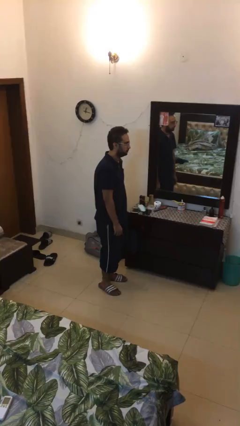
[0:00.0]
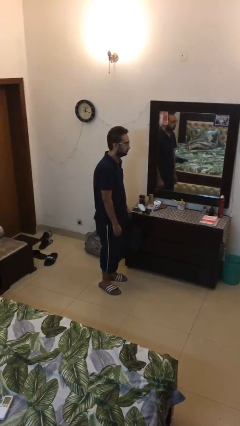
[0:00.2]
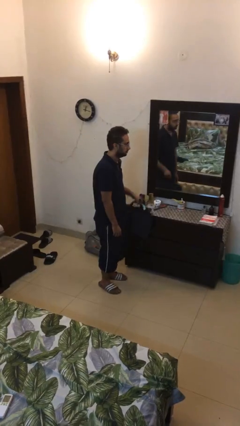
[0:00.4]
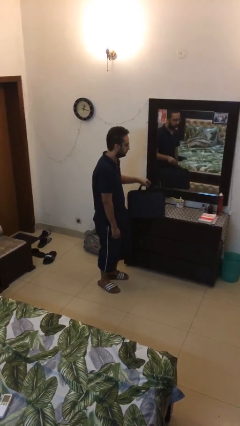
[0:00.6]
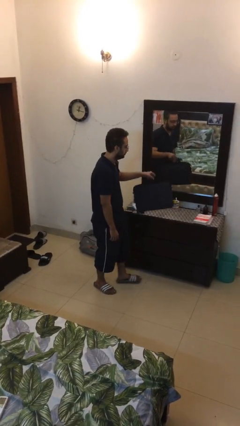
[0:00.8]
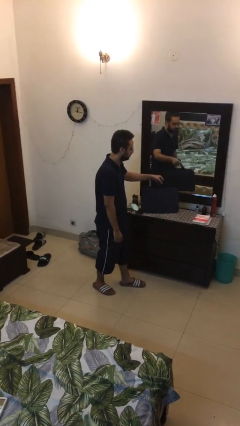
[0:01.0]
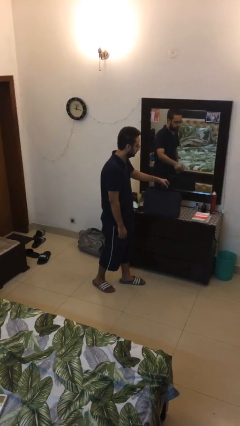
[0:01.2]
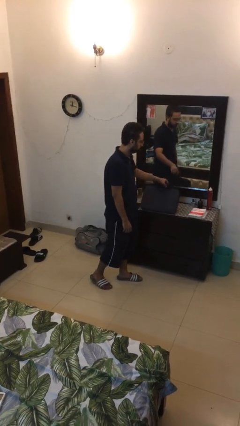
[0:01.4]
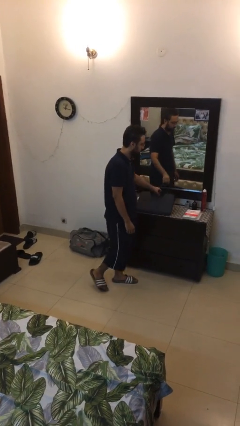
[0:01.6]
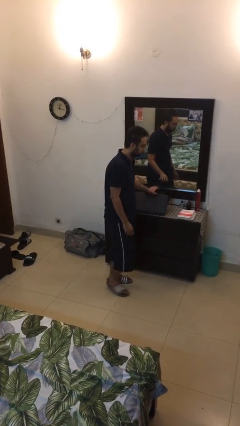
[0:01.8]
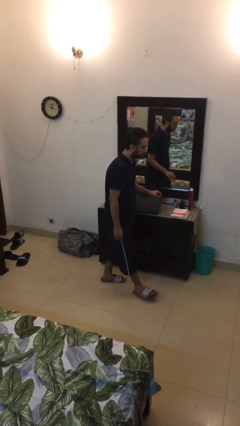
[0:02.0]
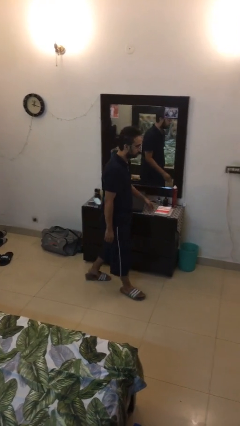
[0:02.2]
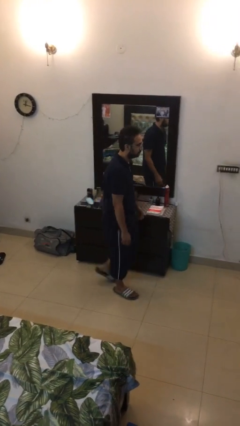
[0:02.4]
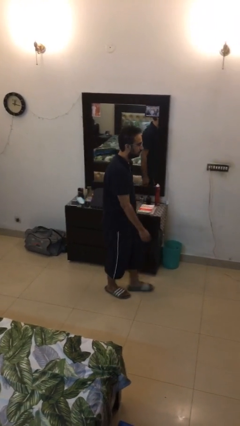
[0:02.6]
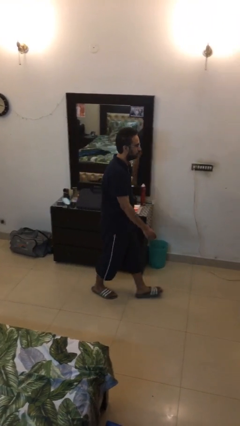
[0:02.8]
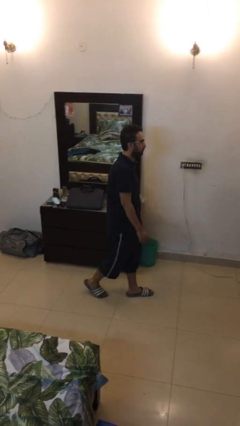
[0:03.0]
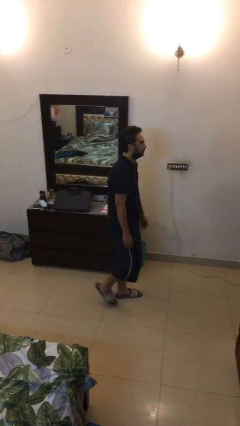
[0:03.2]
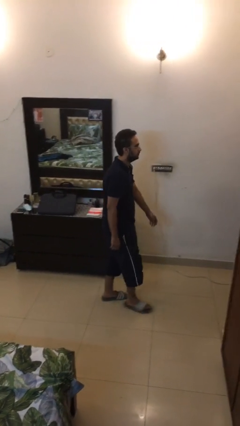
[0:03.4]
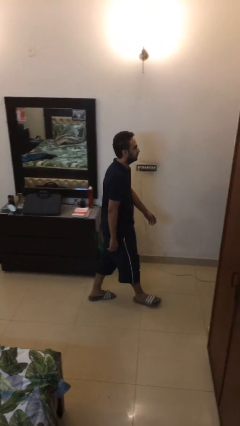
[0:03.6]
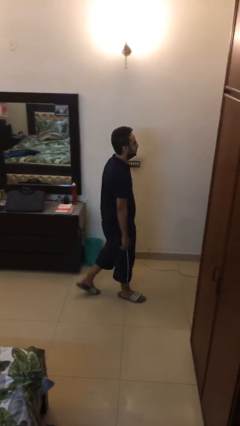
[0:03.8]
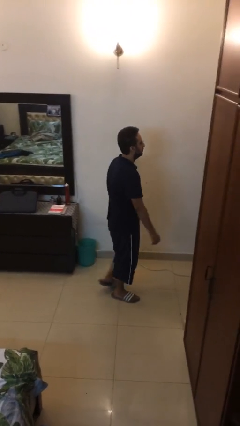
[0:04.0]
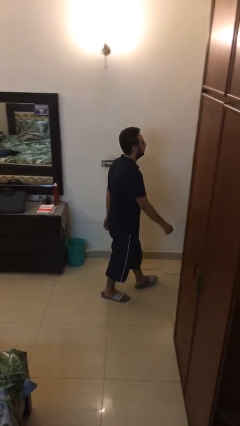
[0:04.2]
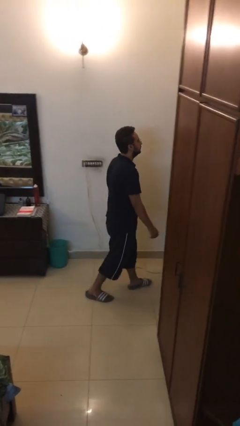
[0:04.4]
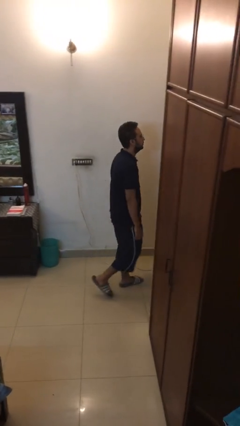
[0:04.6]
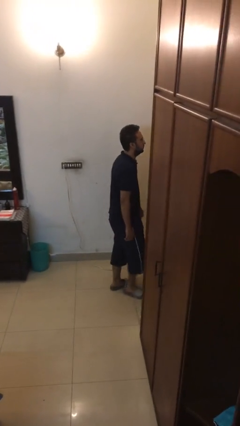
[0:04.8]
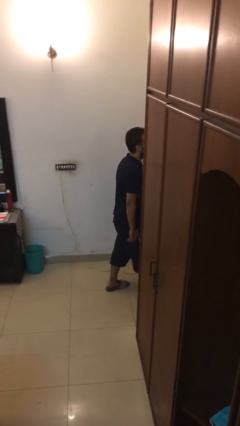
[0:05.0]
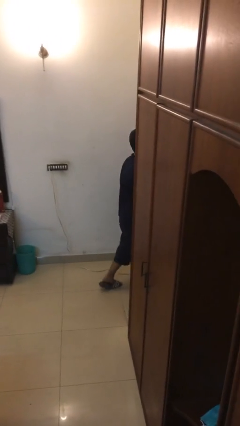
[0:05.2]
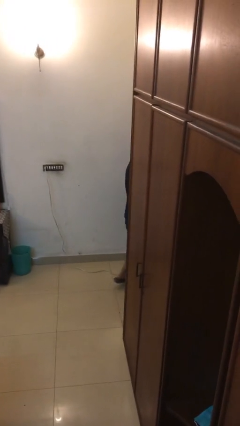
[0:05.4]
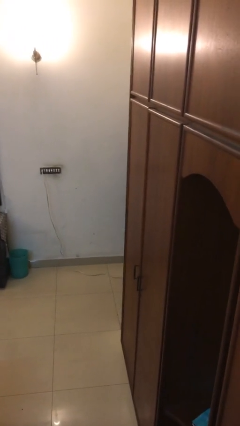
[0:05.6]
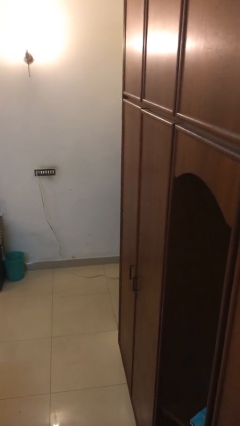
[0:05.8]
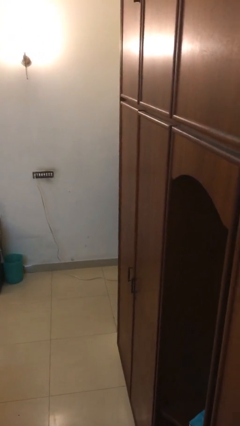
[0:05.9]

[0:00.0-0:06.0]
person puts down object on table

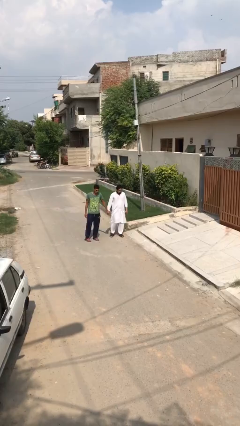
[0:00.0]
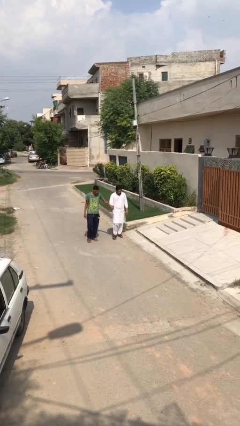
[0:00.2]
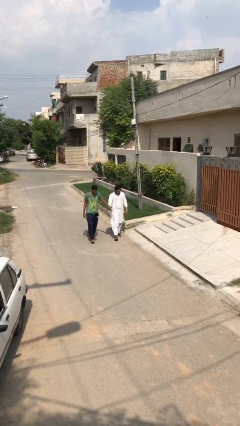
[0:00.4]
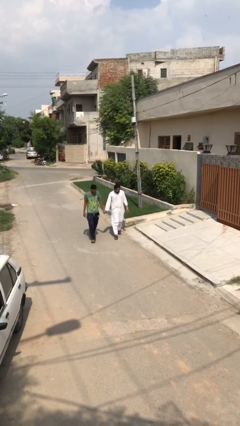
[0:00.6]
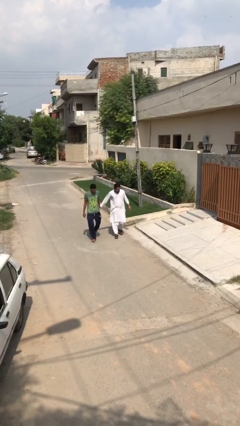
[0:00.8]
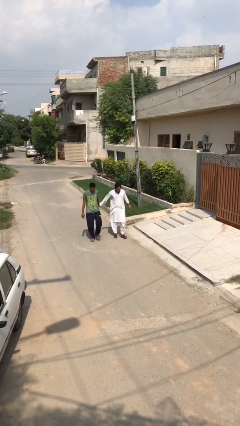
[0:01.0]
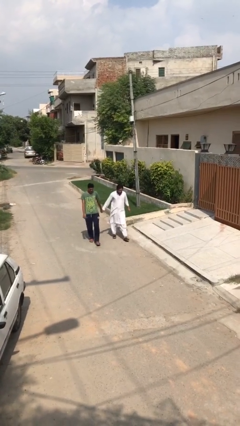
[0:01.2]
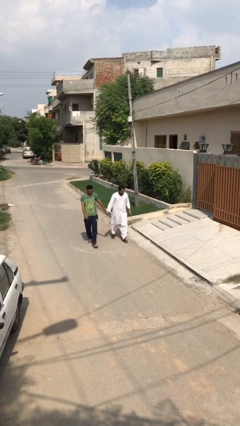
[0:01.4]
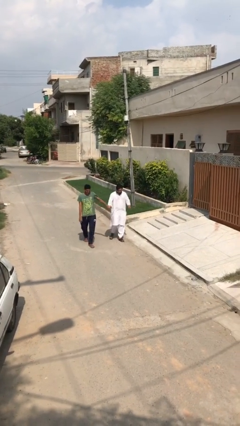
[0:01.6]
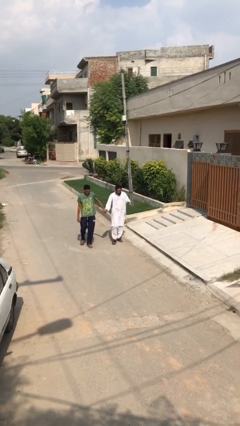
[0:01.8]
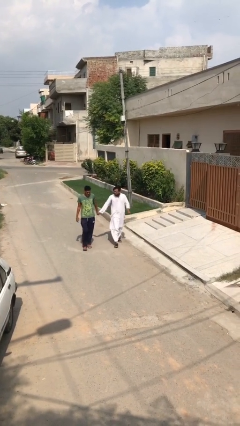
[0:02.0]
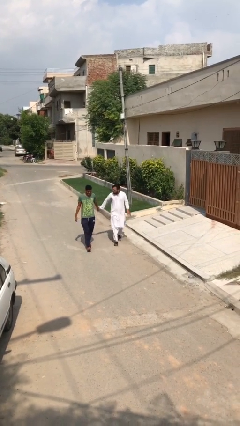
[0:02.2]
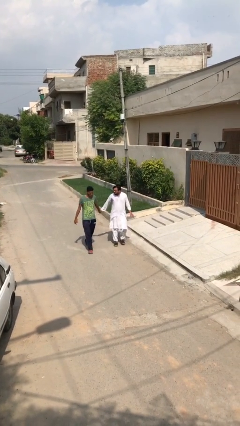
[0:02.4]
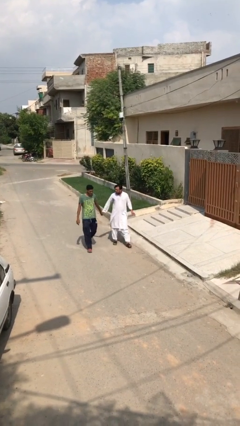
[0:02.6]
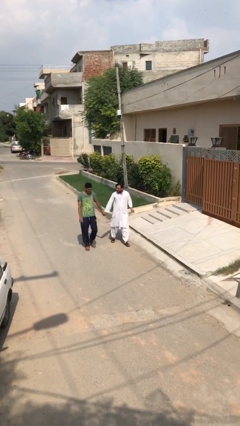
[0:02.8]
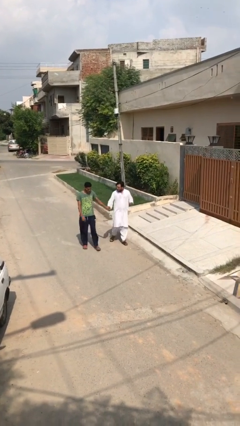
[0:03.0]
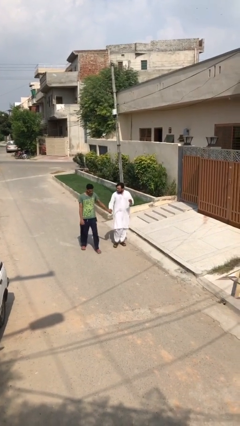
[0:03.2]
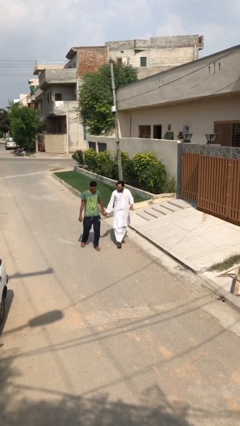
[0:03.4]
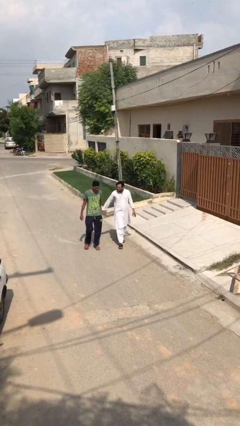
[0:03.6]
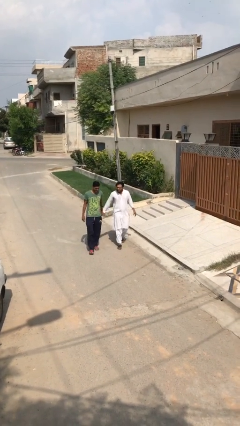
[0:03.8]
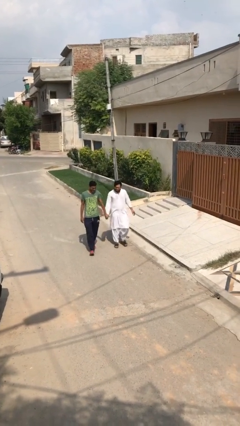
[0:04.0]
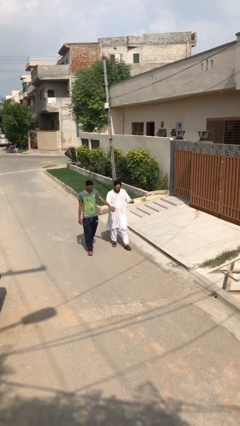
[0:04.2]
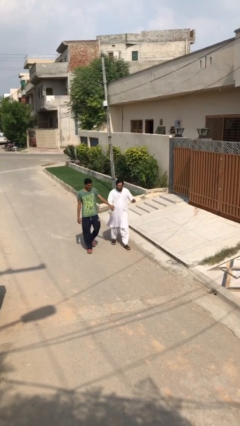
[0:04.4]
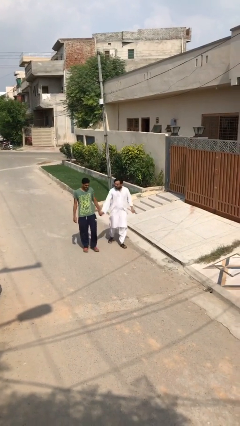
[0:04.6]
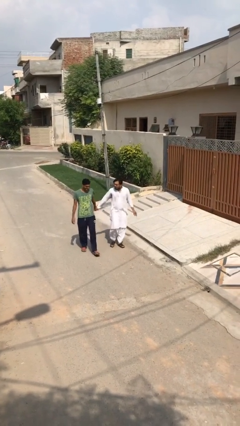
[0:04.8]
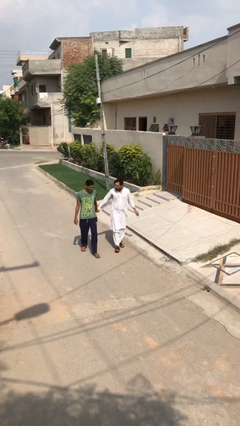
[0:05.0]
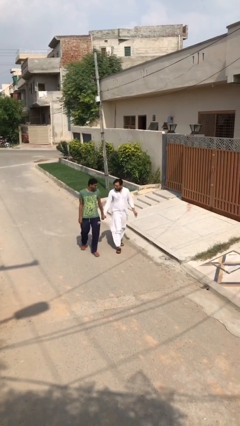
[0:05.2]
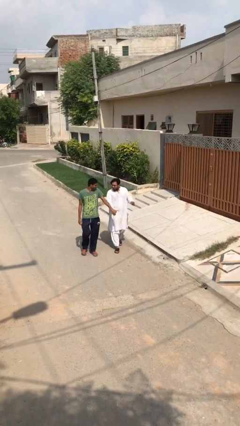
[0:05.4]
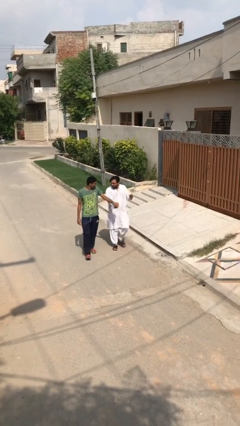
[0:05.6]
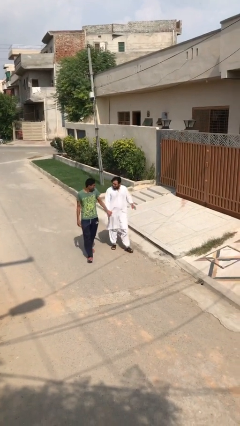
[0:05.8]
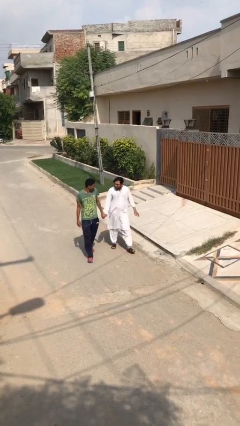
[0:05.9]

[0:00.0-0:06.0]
person holds hand

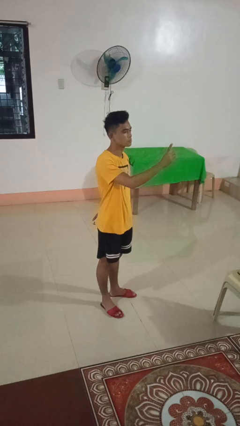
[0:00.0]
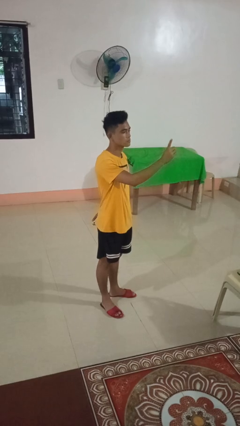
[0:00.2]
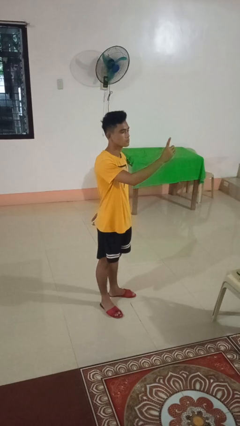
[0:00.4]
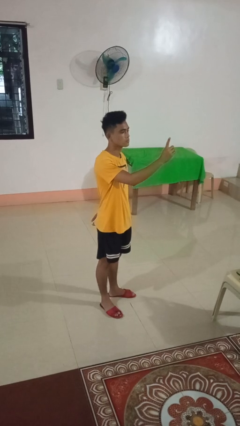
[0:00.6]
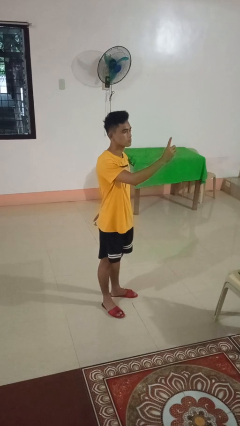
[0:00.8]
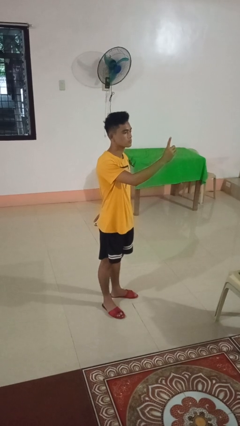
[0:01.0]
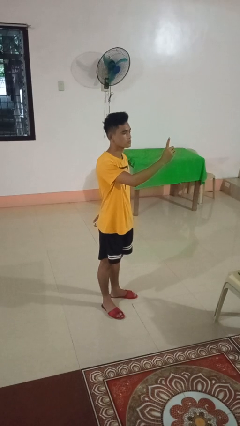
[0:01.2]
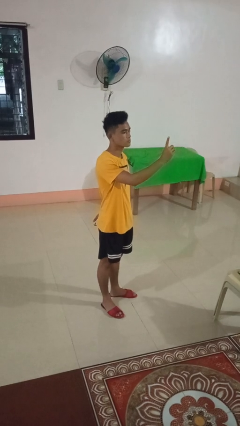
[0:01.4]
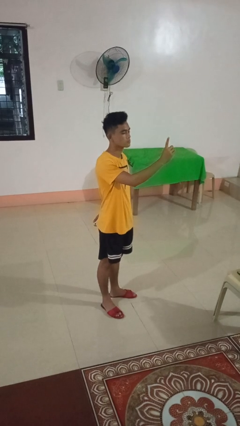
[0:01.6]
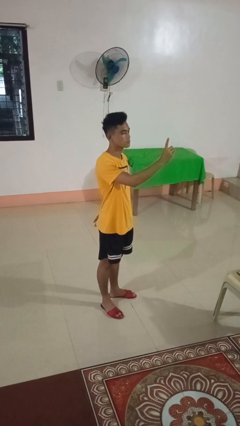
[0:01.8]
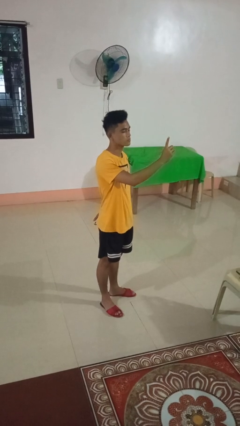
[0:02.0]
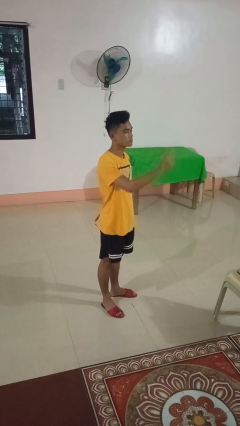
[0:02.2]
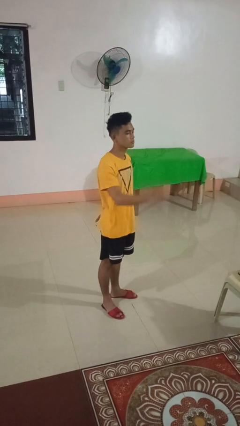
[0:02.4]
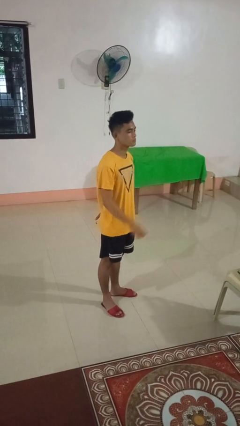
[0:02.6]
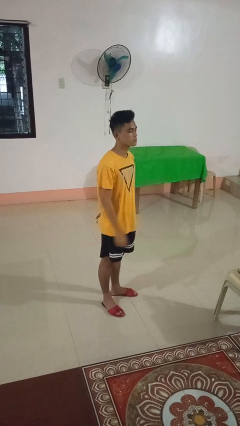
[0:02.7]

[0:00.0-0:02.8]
person gestures number one

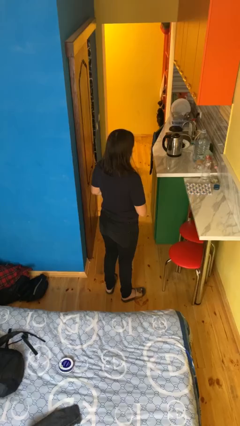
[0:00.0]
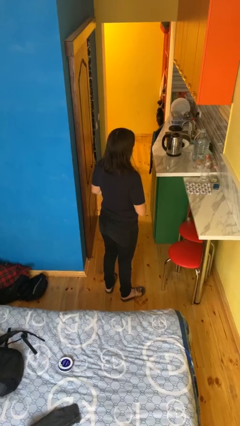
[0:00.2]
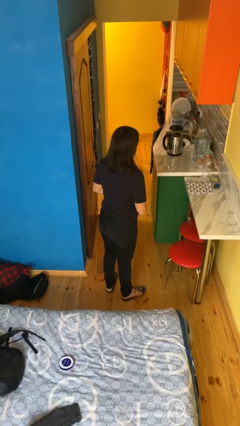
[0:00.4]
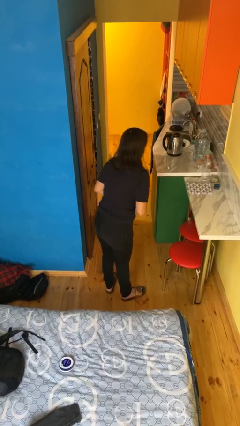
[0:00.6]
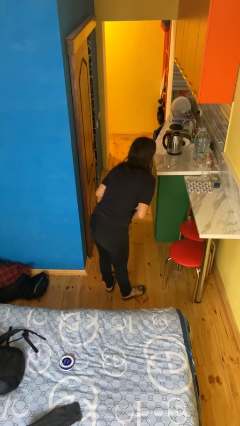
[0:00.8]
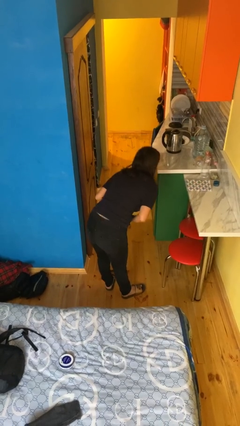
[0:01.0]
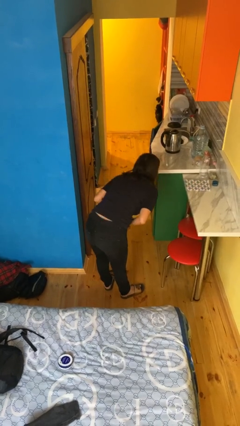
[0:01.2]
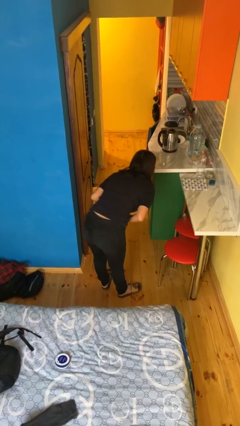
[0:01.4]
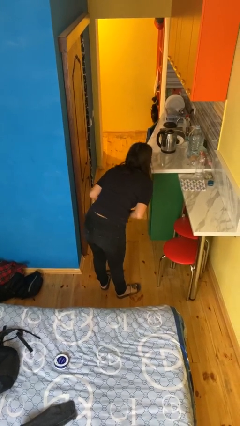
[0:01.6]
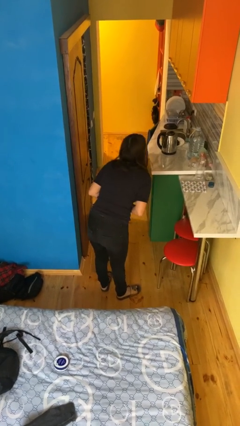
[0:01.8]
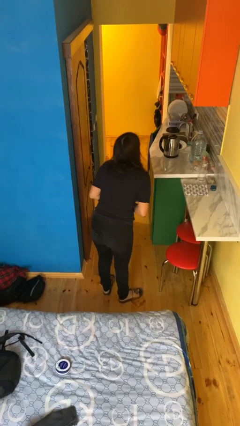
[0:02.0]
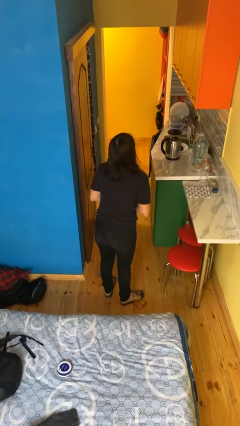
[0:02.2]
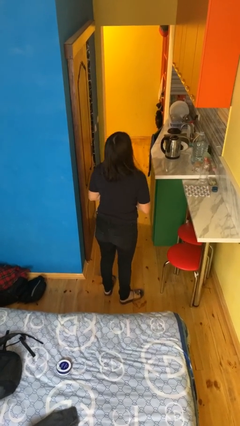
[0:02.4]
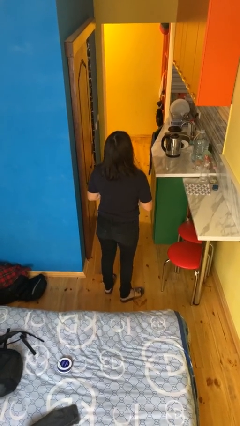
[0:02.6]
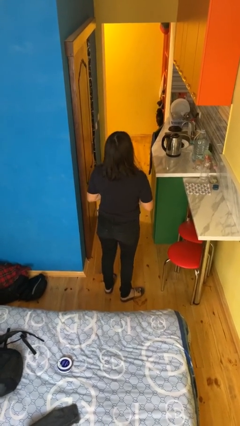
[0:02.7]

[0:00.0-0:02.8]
person bows

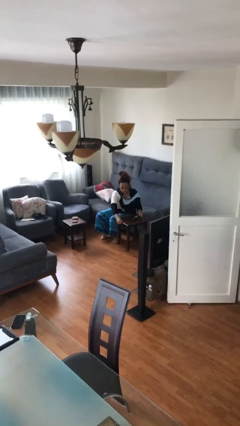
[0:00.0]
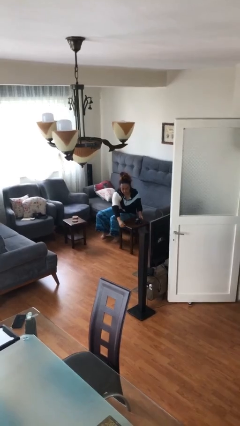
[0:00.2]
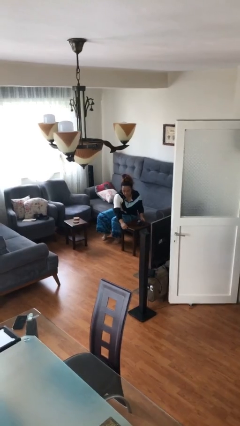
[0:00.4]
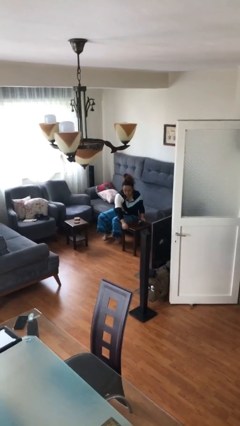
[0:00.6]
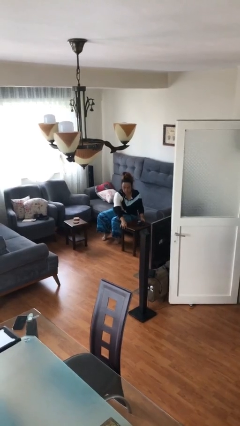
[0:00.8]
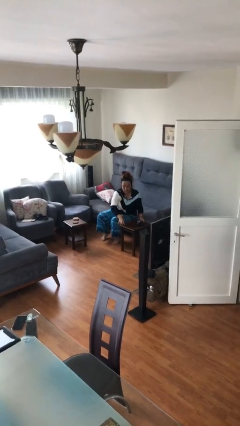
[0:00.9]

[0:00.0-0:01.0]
person puts down object on floor
